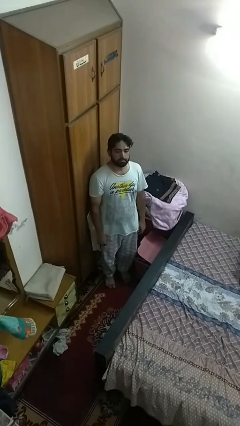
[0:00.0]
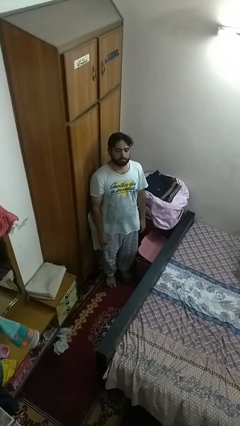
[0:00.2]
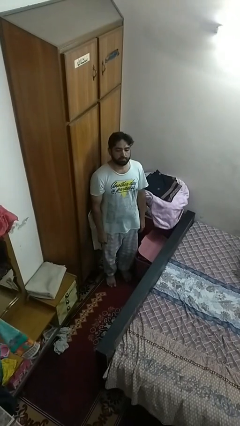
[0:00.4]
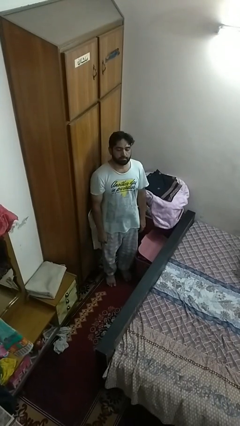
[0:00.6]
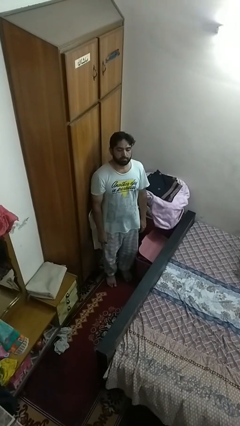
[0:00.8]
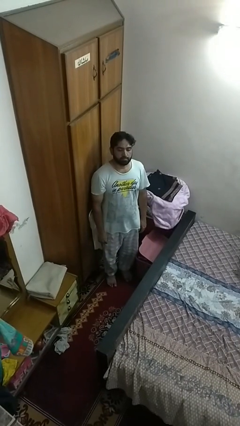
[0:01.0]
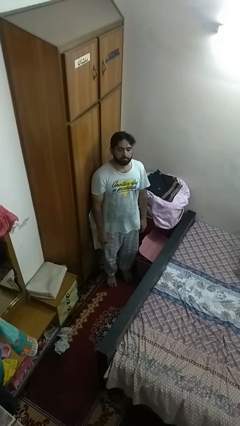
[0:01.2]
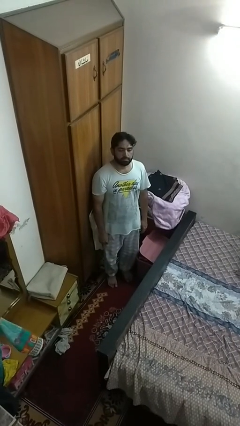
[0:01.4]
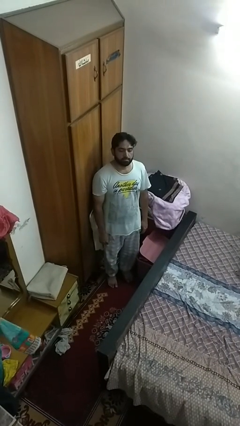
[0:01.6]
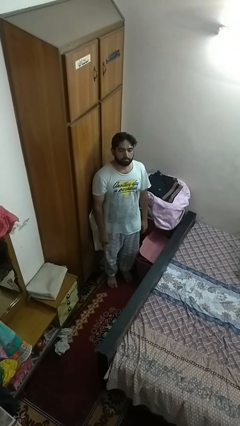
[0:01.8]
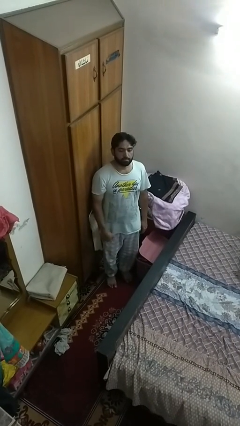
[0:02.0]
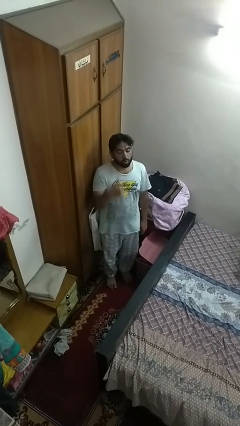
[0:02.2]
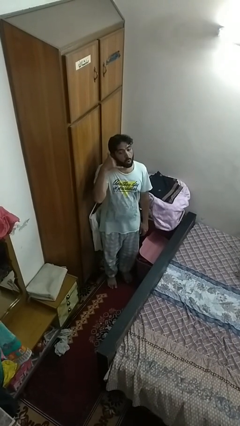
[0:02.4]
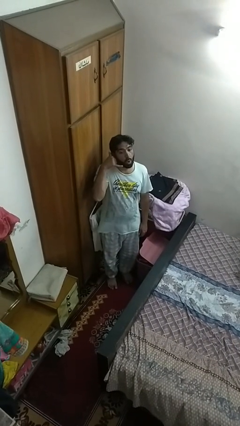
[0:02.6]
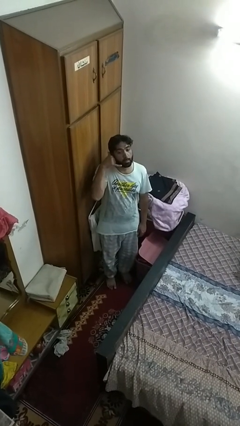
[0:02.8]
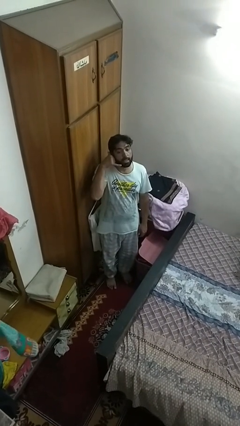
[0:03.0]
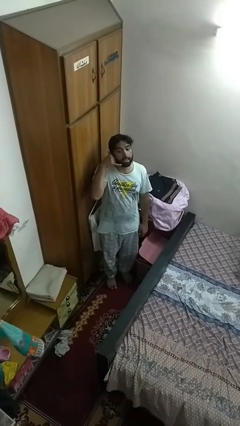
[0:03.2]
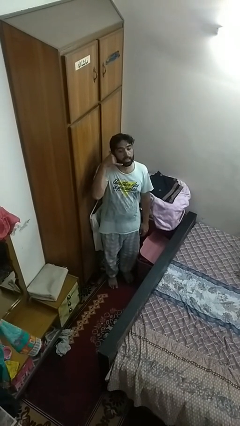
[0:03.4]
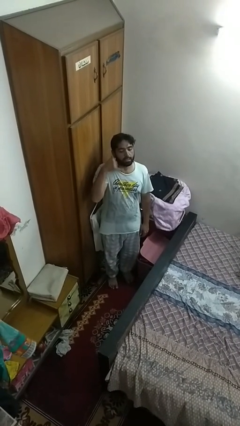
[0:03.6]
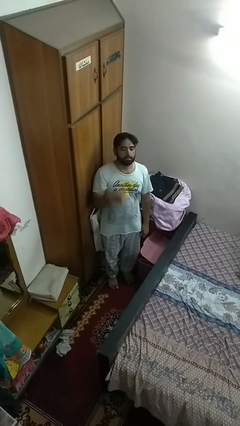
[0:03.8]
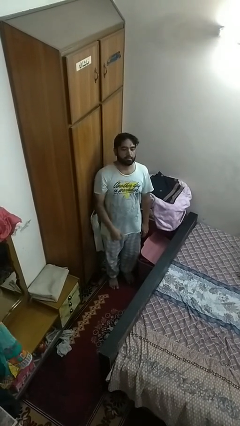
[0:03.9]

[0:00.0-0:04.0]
person gestures call me

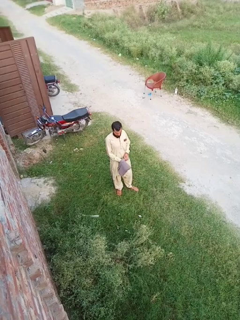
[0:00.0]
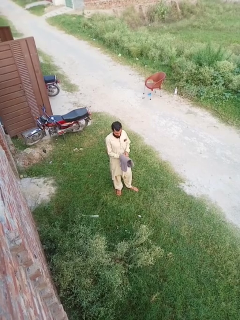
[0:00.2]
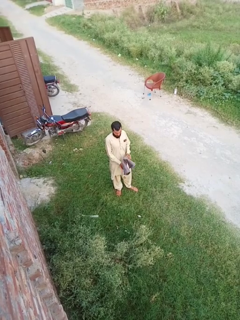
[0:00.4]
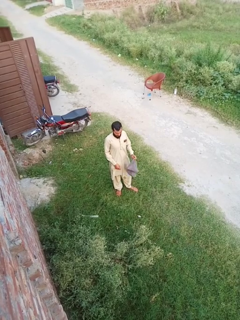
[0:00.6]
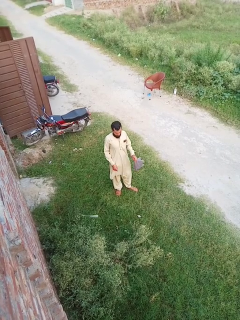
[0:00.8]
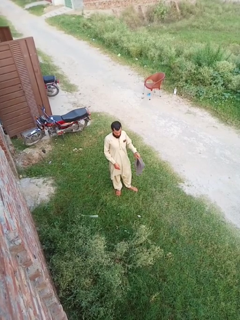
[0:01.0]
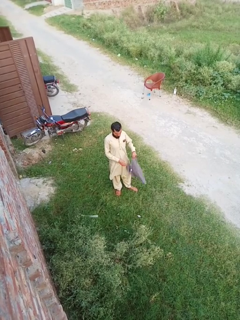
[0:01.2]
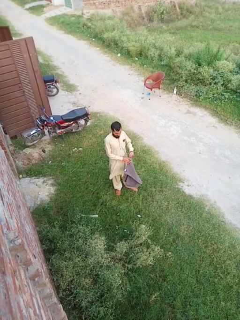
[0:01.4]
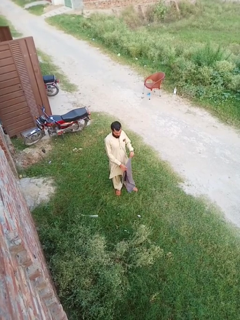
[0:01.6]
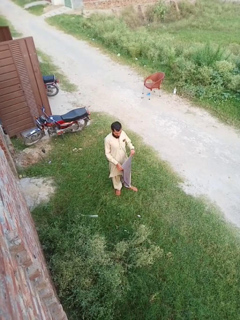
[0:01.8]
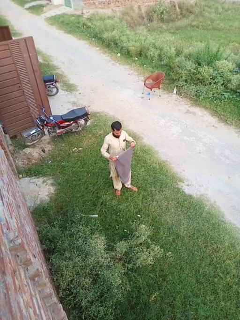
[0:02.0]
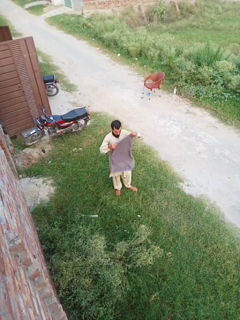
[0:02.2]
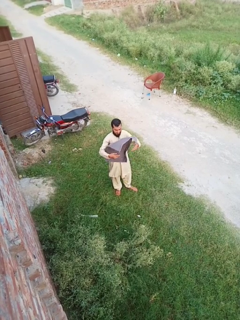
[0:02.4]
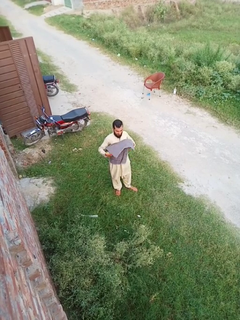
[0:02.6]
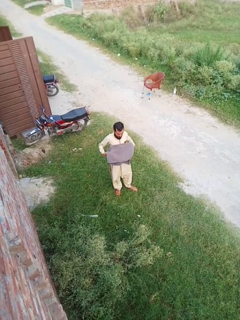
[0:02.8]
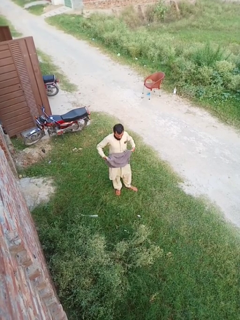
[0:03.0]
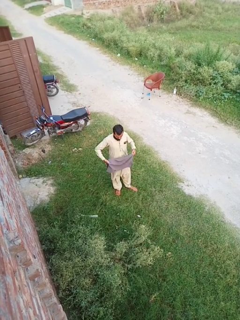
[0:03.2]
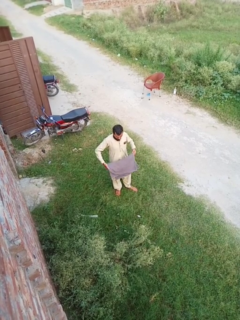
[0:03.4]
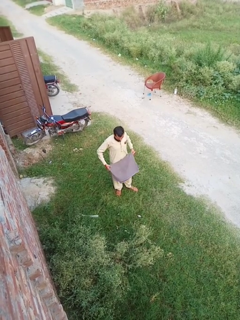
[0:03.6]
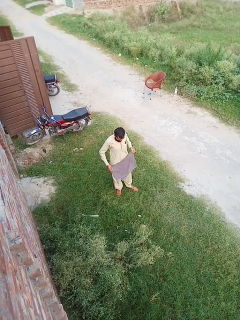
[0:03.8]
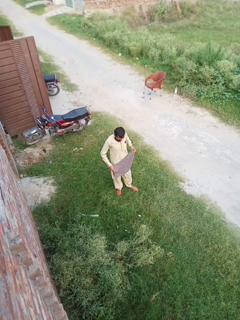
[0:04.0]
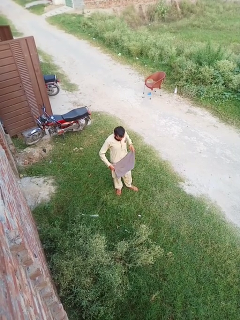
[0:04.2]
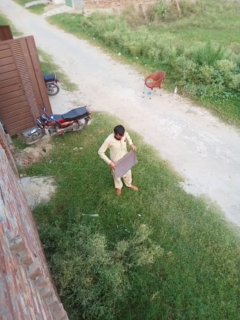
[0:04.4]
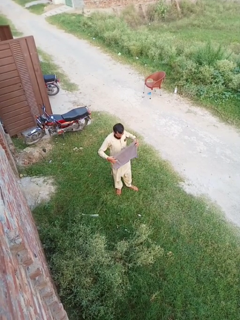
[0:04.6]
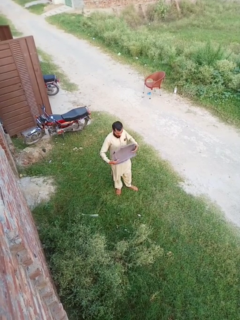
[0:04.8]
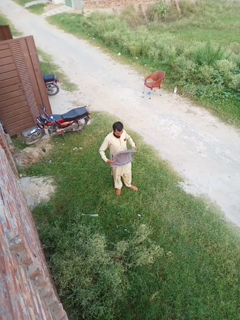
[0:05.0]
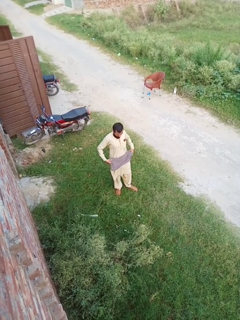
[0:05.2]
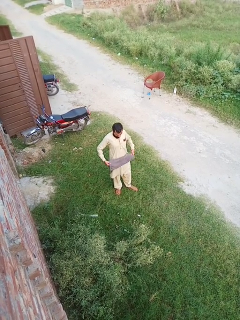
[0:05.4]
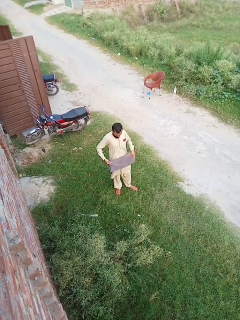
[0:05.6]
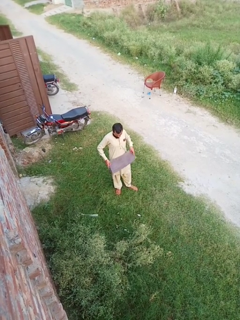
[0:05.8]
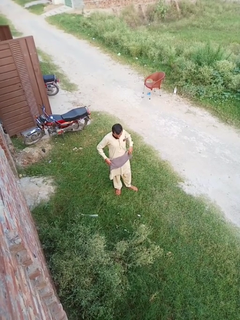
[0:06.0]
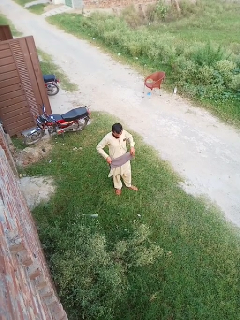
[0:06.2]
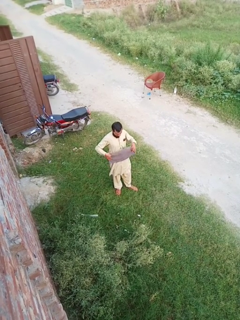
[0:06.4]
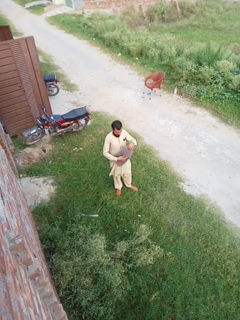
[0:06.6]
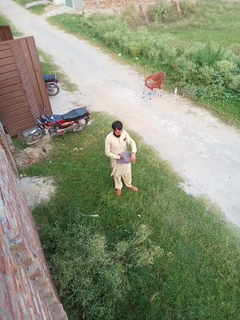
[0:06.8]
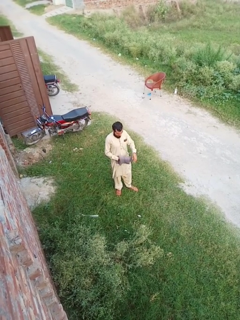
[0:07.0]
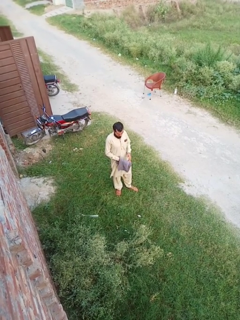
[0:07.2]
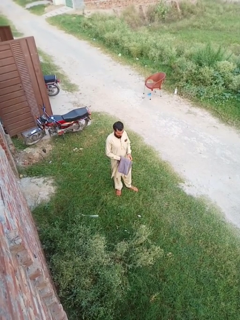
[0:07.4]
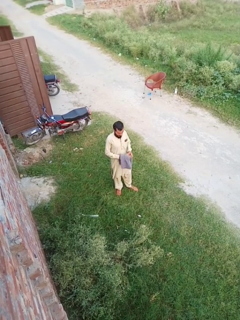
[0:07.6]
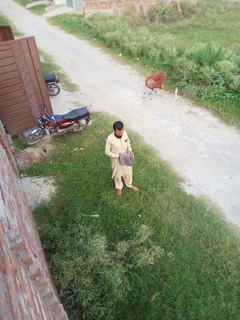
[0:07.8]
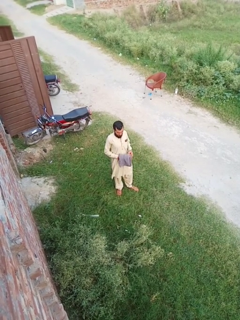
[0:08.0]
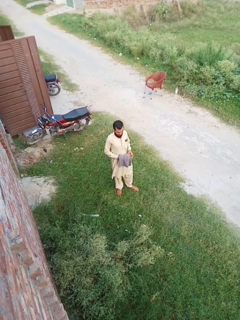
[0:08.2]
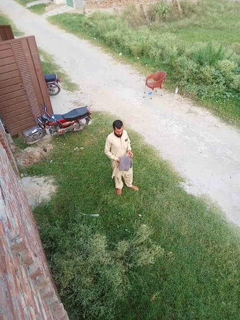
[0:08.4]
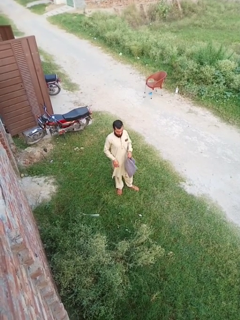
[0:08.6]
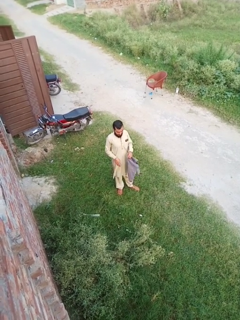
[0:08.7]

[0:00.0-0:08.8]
person folds towel

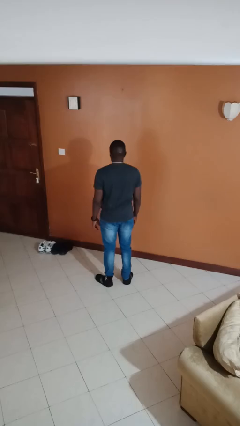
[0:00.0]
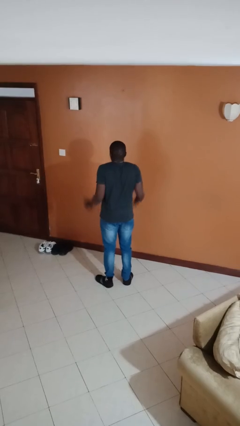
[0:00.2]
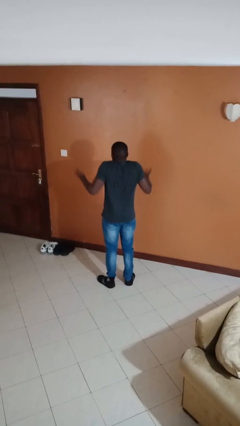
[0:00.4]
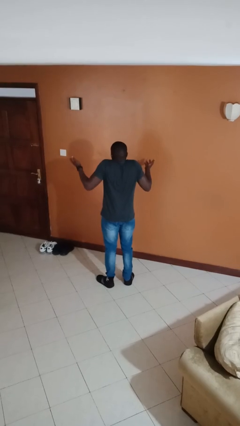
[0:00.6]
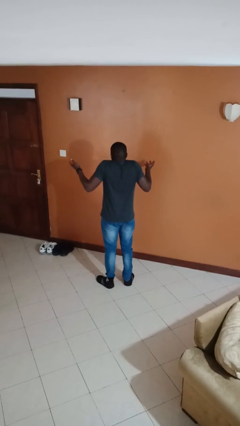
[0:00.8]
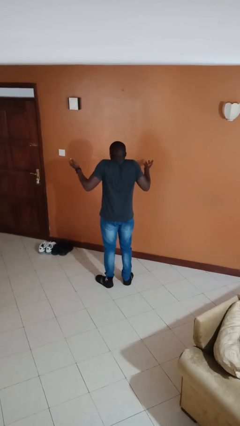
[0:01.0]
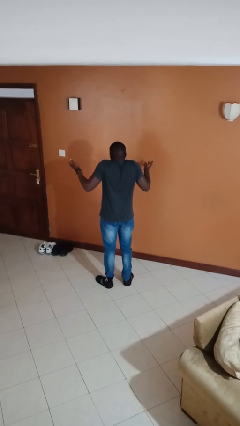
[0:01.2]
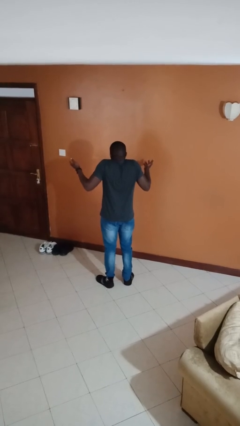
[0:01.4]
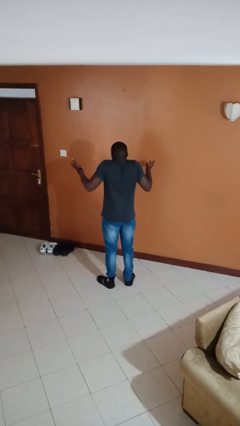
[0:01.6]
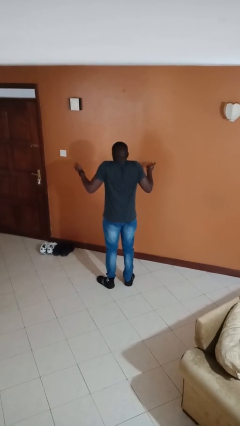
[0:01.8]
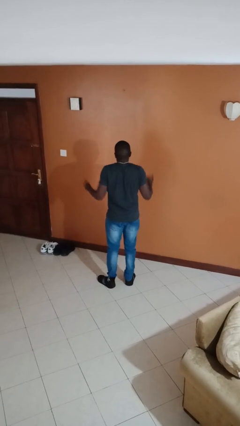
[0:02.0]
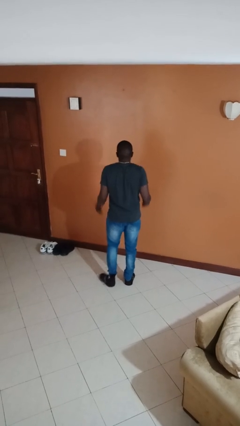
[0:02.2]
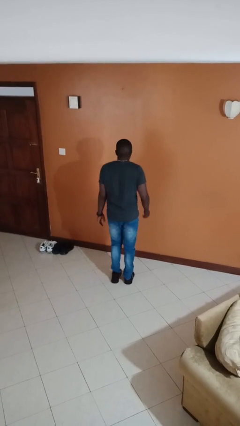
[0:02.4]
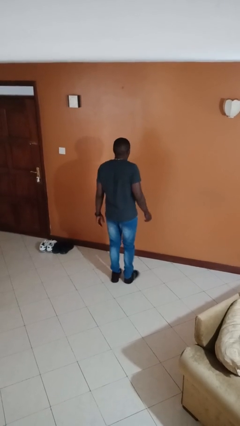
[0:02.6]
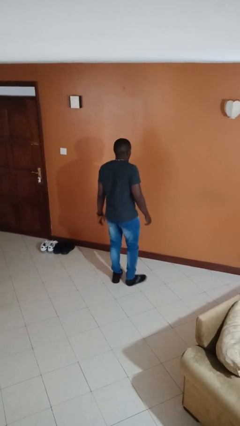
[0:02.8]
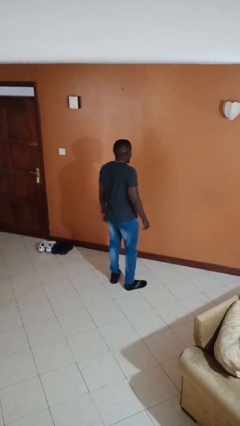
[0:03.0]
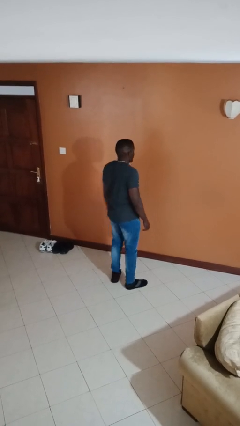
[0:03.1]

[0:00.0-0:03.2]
person shrugs

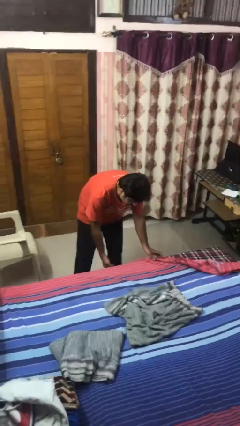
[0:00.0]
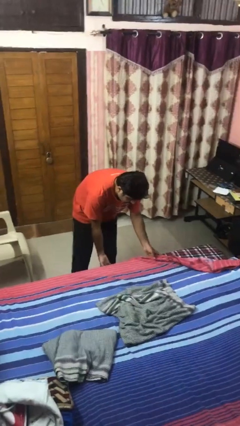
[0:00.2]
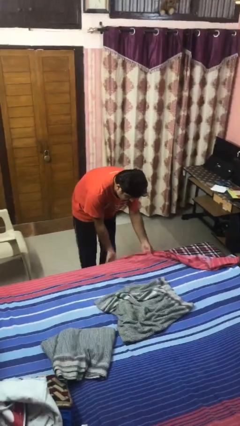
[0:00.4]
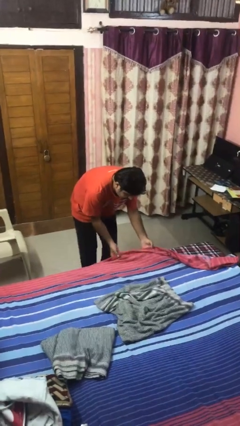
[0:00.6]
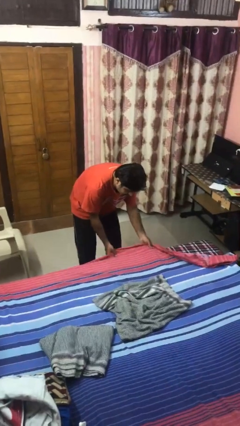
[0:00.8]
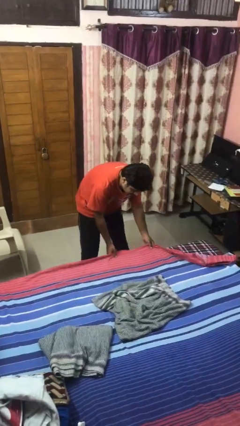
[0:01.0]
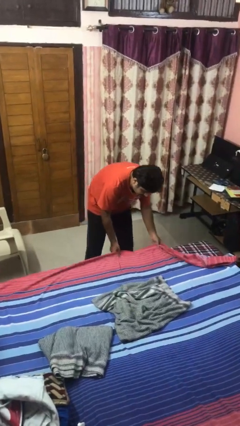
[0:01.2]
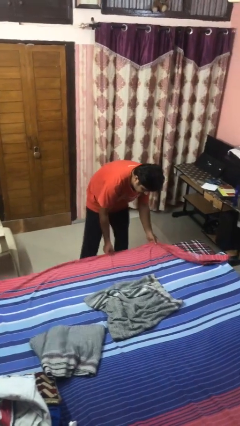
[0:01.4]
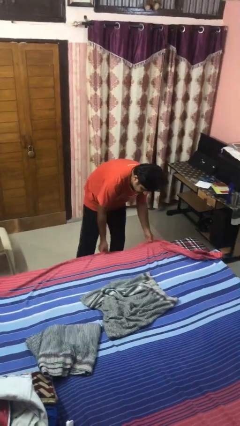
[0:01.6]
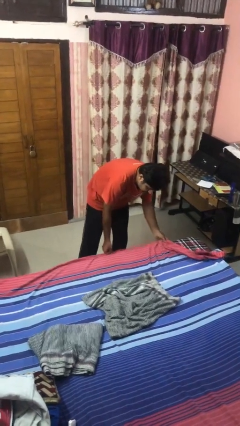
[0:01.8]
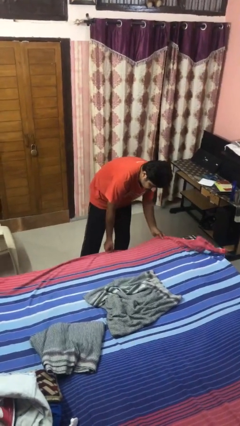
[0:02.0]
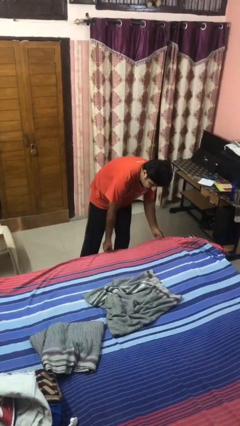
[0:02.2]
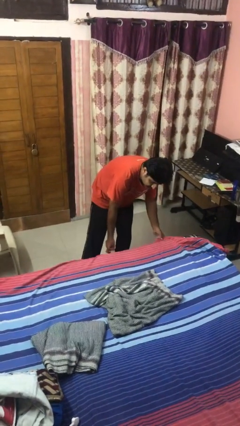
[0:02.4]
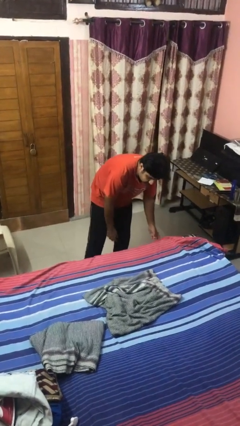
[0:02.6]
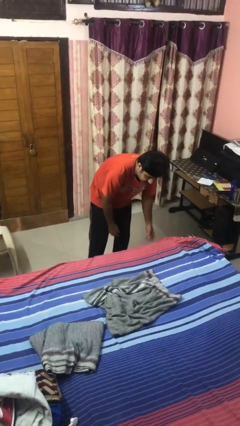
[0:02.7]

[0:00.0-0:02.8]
person makes bed

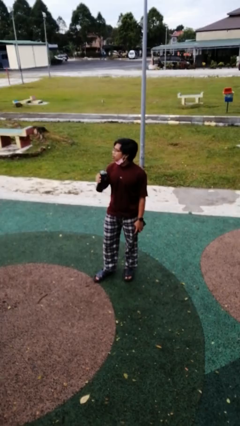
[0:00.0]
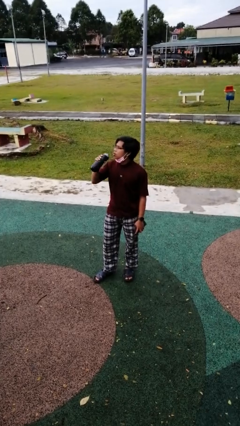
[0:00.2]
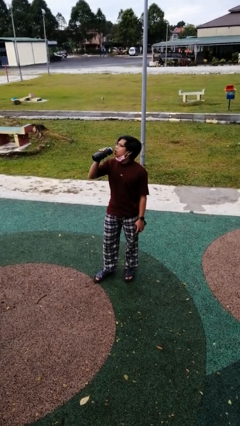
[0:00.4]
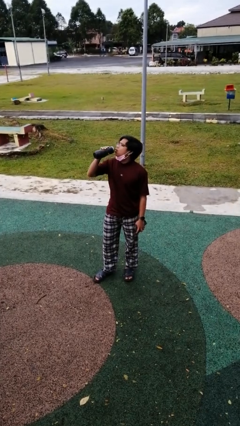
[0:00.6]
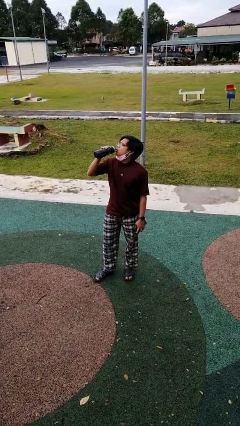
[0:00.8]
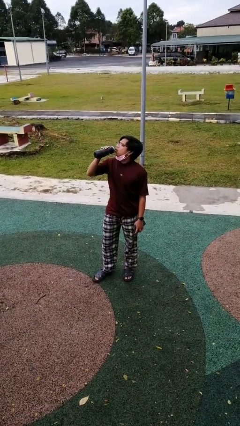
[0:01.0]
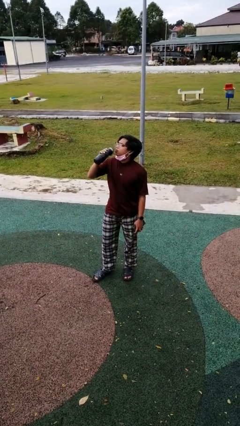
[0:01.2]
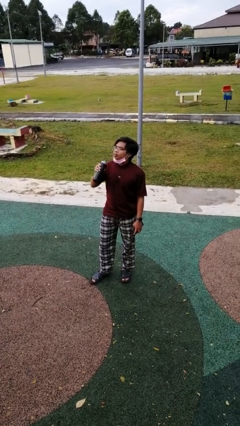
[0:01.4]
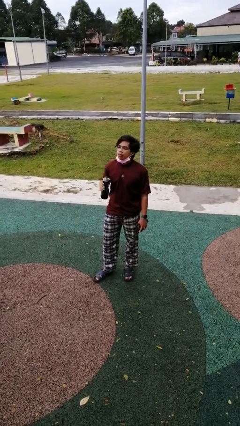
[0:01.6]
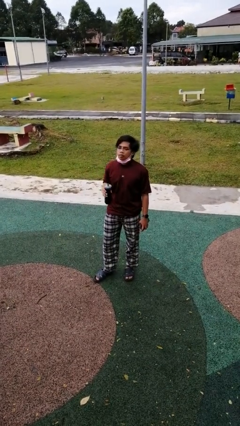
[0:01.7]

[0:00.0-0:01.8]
person drinks from bottle
